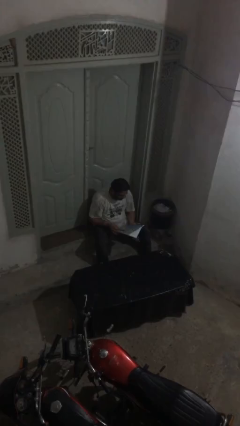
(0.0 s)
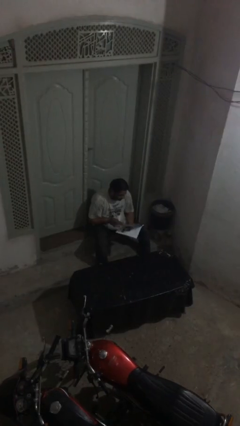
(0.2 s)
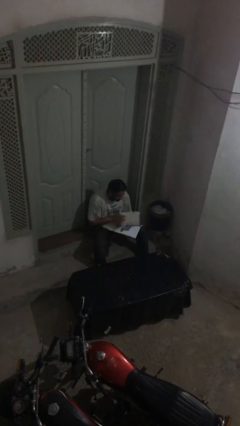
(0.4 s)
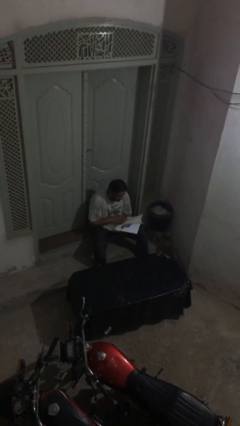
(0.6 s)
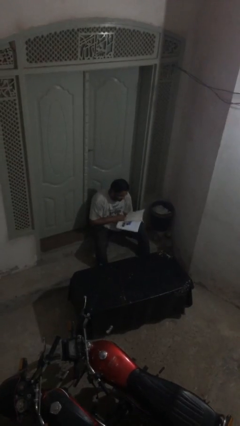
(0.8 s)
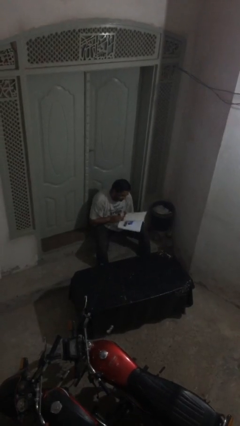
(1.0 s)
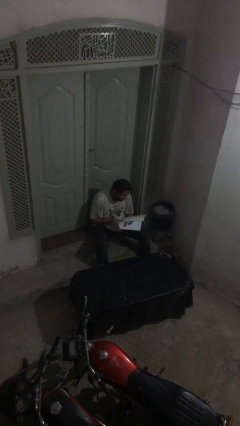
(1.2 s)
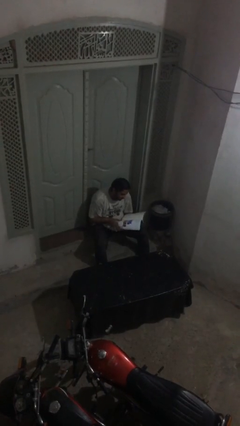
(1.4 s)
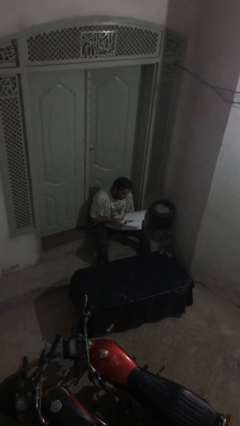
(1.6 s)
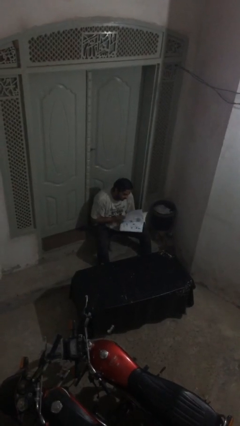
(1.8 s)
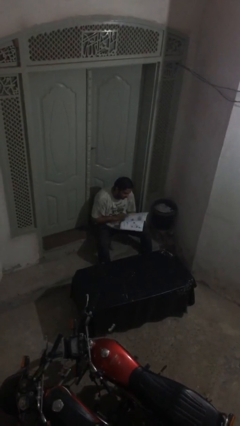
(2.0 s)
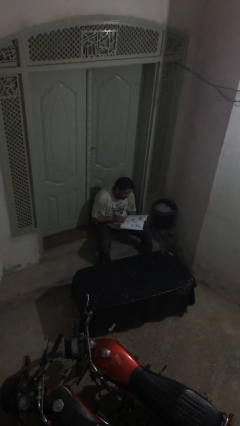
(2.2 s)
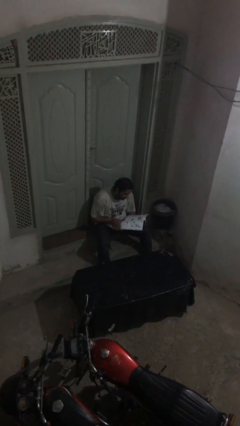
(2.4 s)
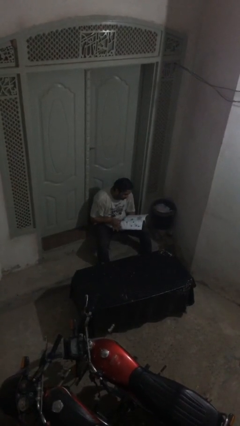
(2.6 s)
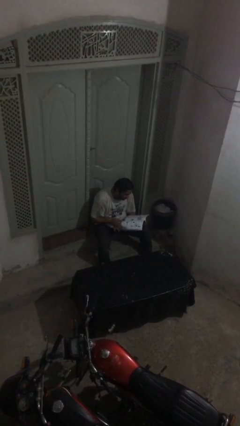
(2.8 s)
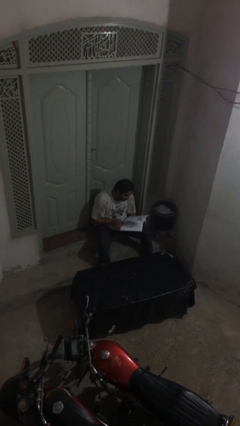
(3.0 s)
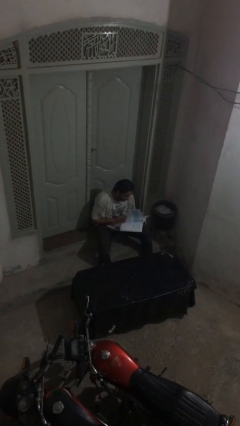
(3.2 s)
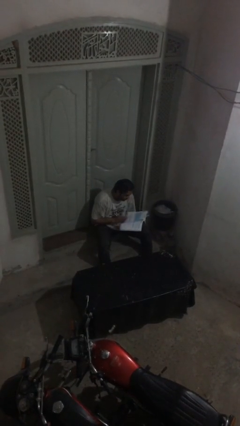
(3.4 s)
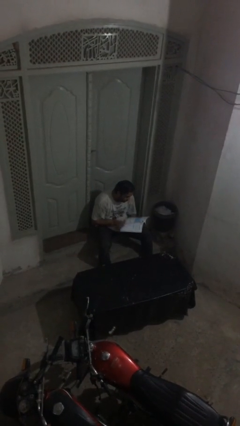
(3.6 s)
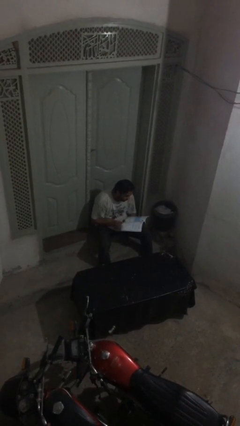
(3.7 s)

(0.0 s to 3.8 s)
person reads document

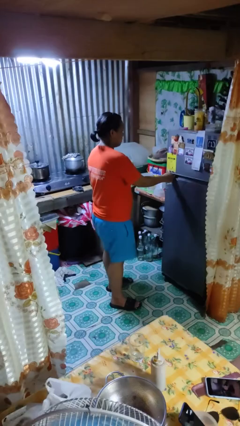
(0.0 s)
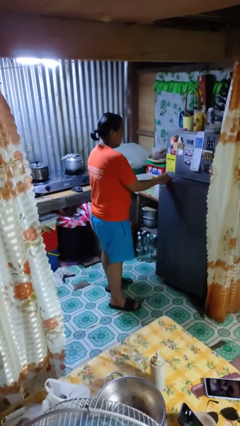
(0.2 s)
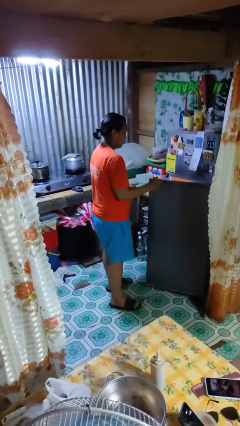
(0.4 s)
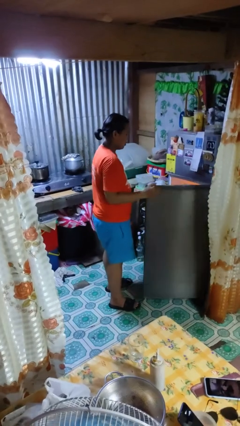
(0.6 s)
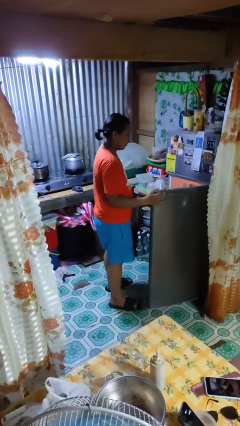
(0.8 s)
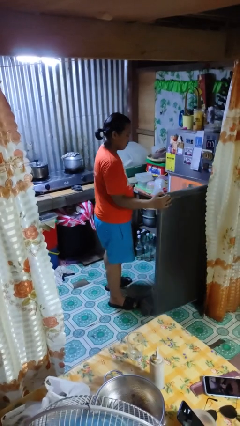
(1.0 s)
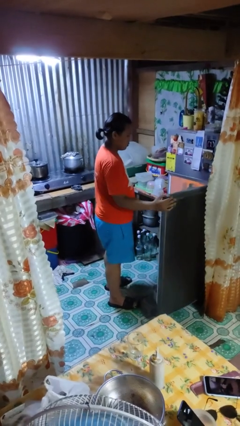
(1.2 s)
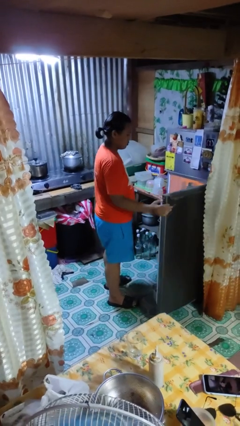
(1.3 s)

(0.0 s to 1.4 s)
person opens refrigerator

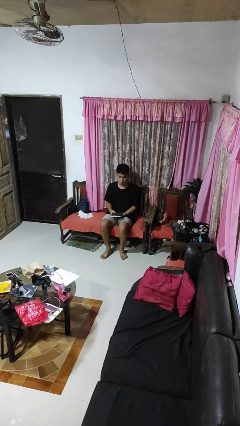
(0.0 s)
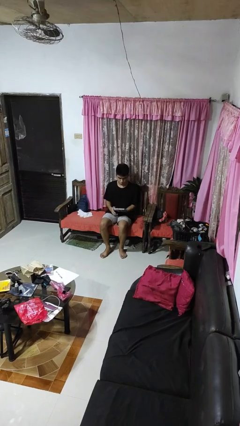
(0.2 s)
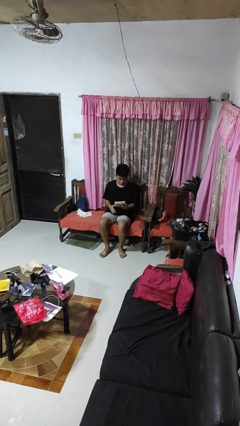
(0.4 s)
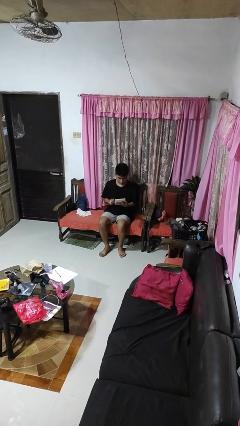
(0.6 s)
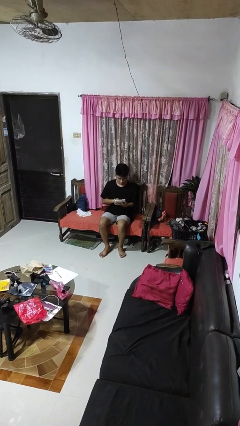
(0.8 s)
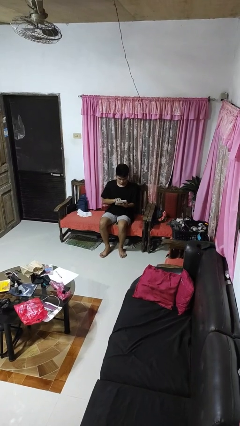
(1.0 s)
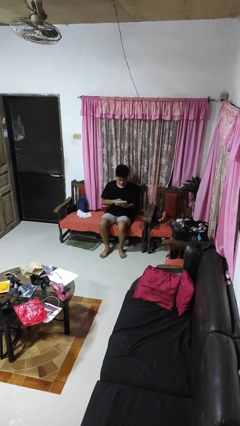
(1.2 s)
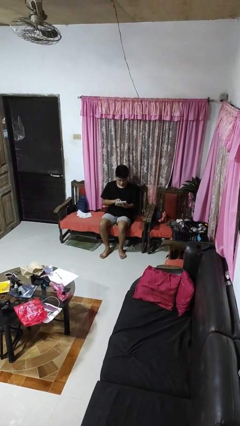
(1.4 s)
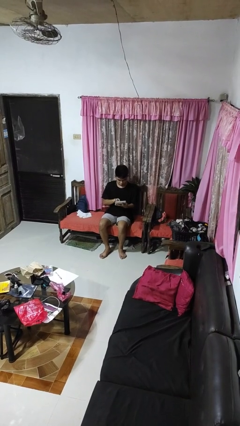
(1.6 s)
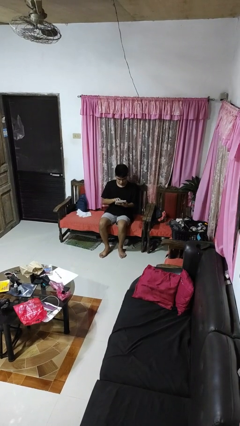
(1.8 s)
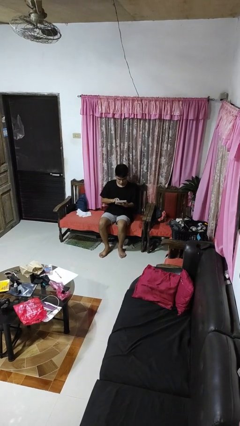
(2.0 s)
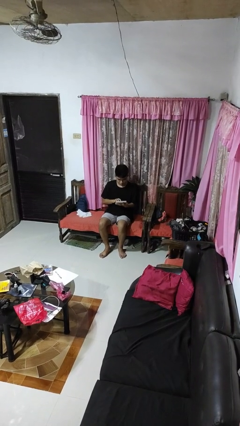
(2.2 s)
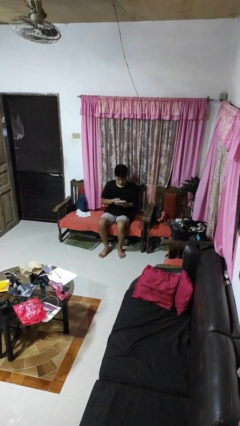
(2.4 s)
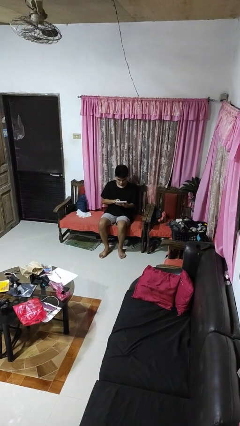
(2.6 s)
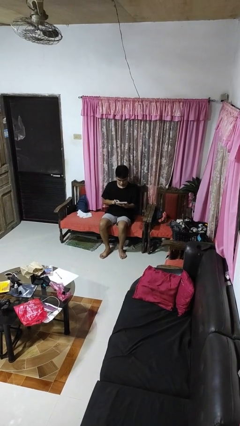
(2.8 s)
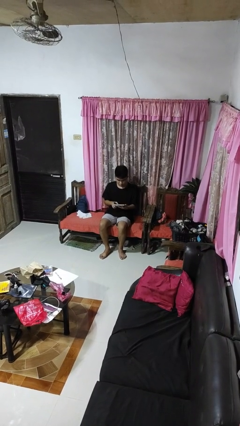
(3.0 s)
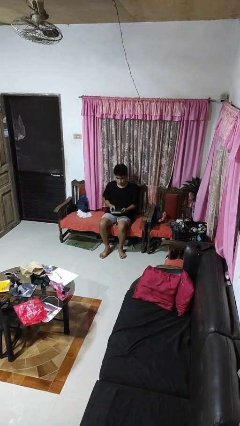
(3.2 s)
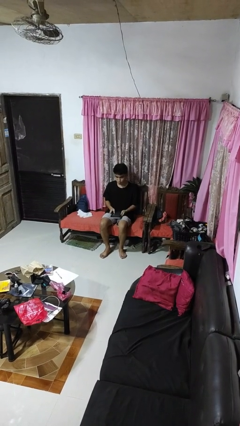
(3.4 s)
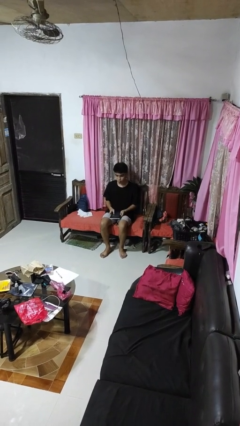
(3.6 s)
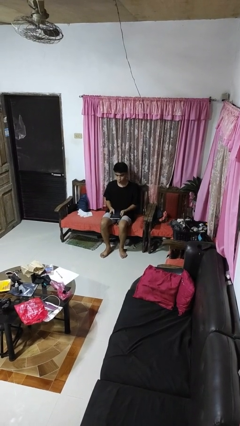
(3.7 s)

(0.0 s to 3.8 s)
person interacts with tablet

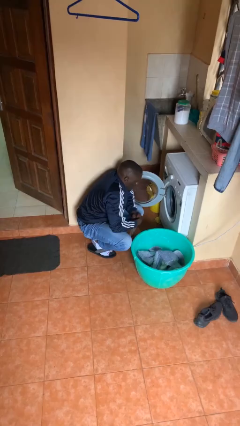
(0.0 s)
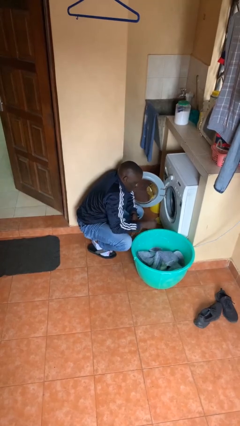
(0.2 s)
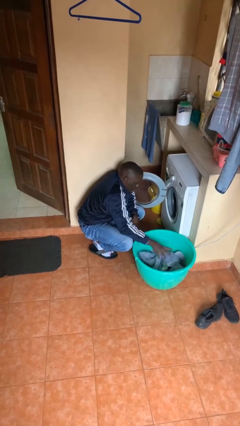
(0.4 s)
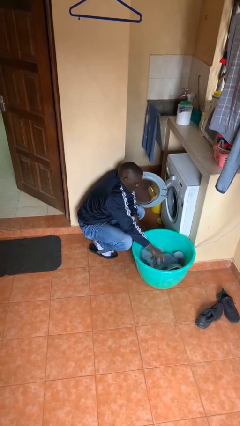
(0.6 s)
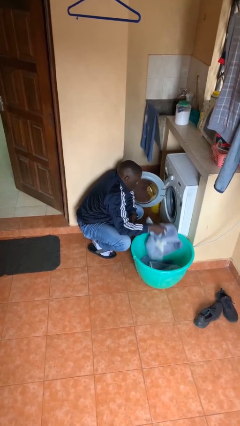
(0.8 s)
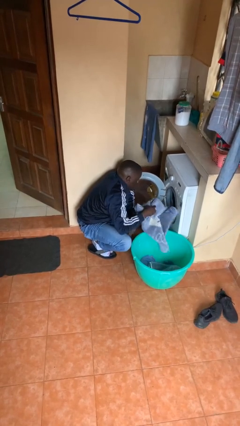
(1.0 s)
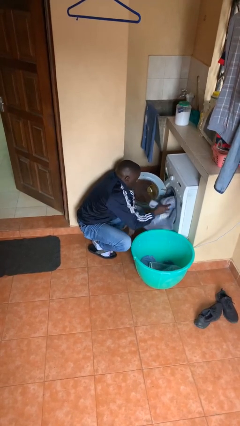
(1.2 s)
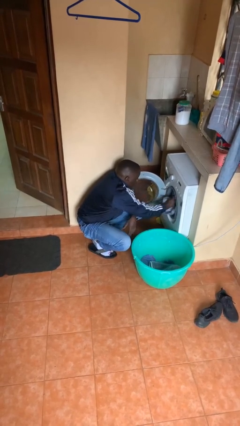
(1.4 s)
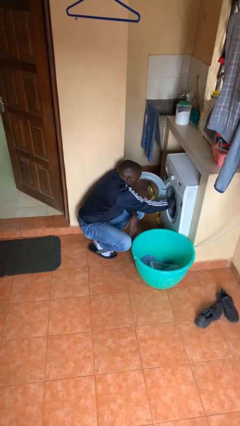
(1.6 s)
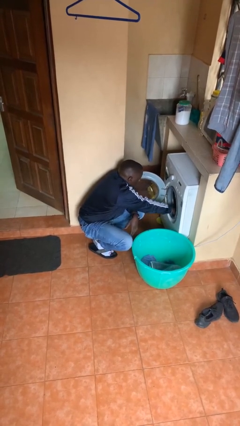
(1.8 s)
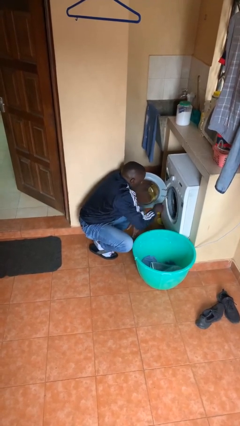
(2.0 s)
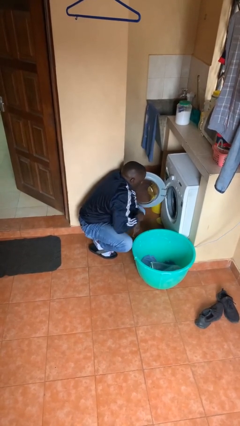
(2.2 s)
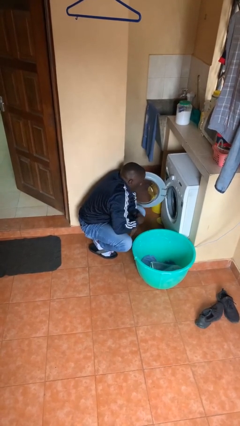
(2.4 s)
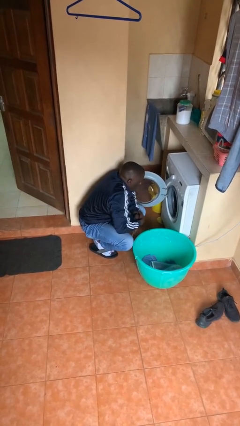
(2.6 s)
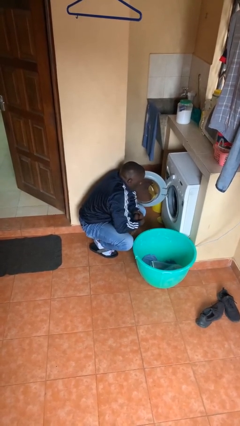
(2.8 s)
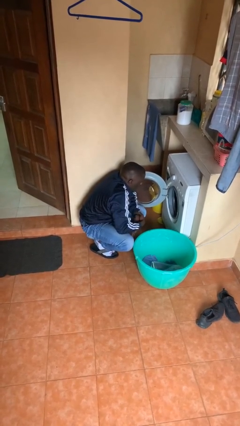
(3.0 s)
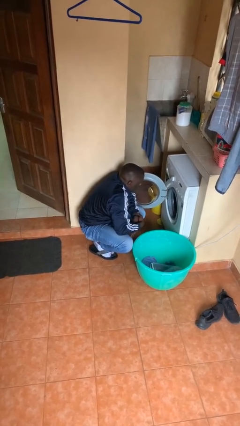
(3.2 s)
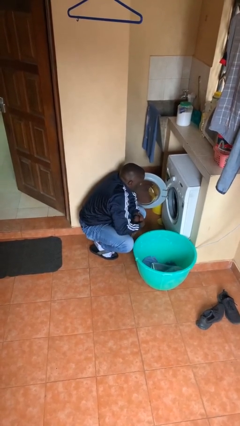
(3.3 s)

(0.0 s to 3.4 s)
person loads clotheswasher

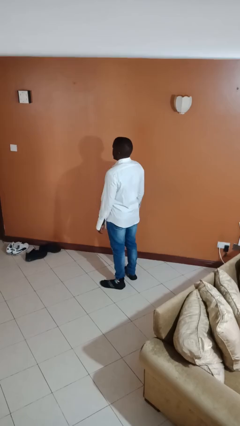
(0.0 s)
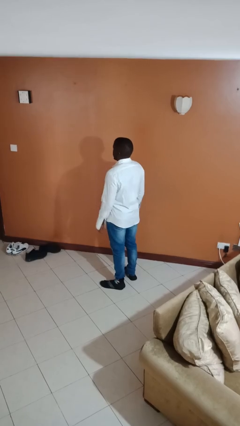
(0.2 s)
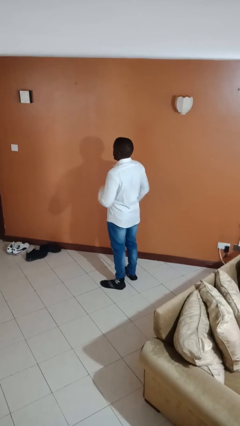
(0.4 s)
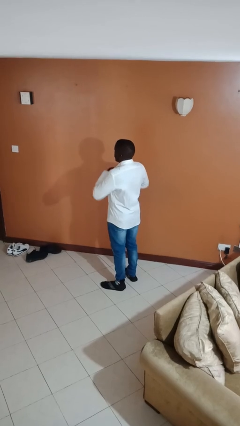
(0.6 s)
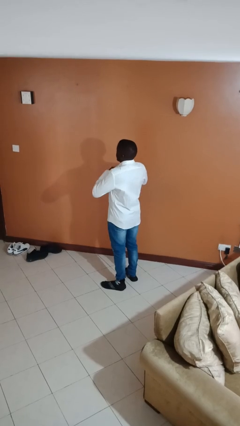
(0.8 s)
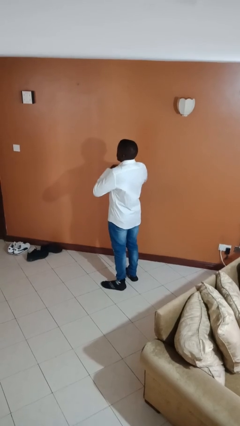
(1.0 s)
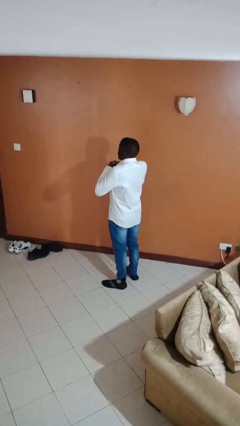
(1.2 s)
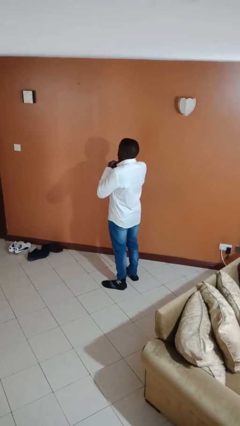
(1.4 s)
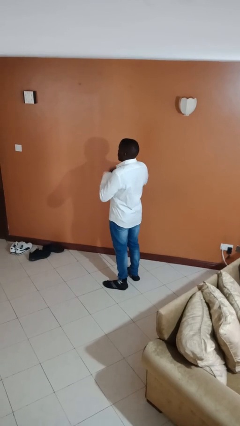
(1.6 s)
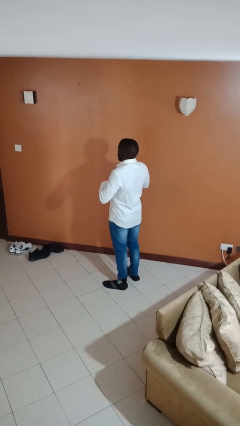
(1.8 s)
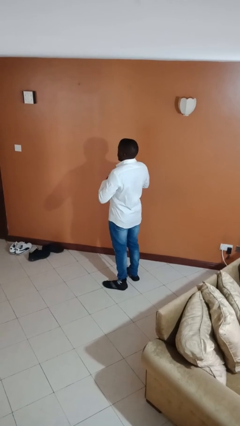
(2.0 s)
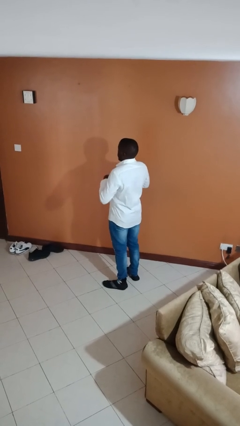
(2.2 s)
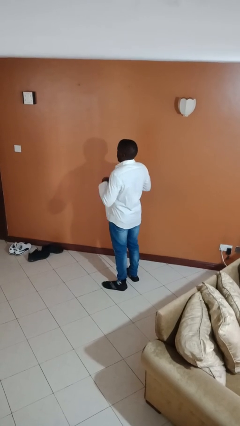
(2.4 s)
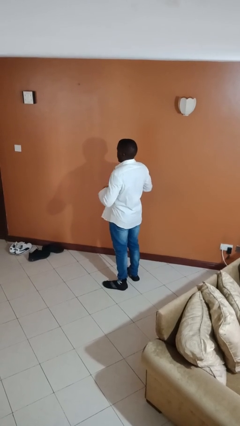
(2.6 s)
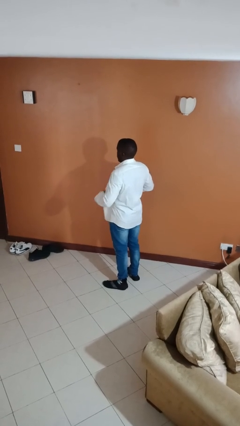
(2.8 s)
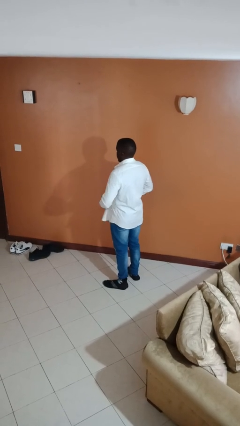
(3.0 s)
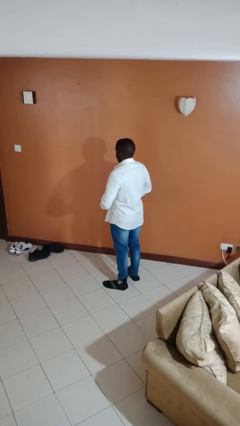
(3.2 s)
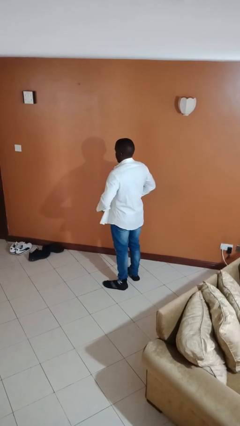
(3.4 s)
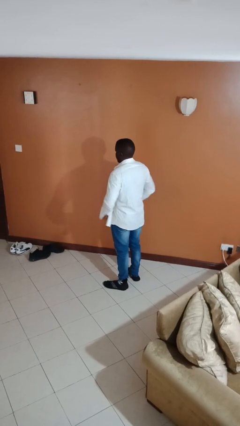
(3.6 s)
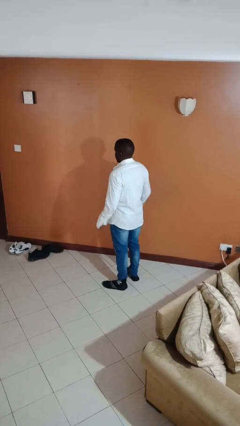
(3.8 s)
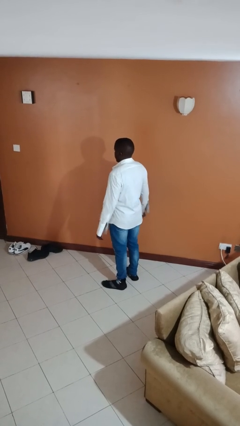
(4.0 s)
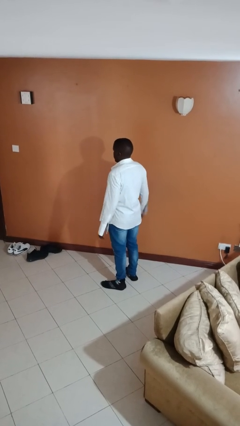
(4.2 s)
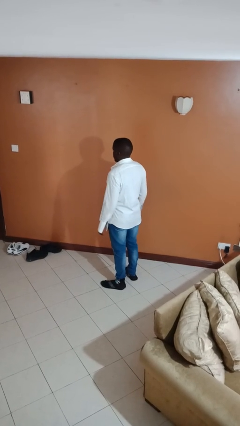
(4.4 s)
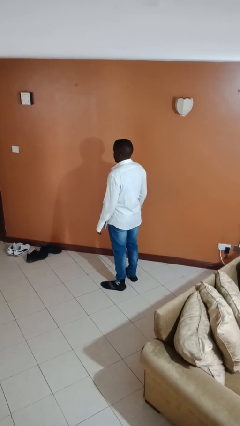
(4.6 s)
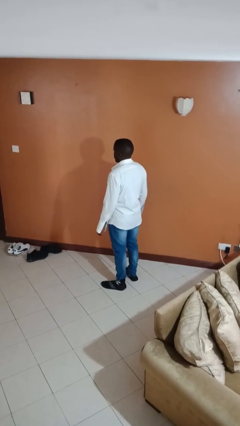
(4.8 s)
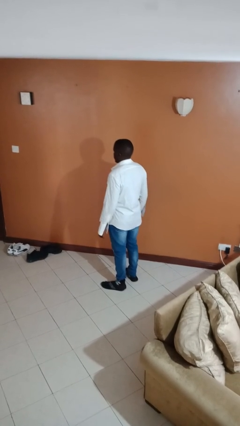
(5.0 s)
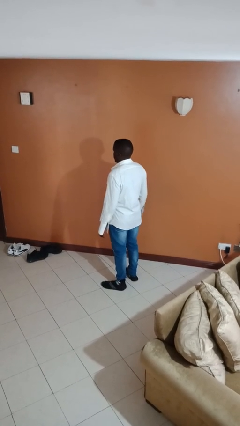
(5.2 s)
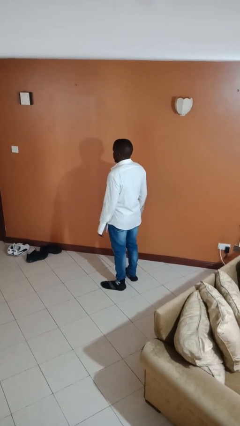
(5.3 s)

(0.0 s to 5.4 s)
person unbuttons shirt
